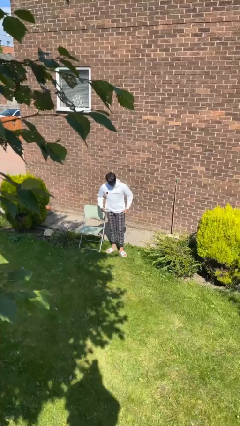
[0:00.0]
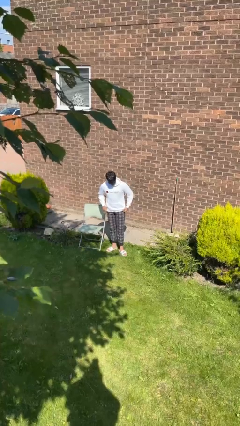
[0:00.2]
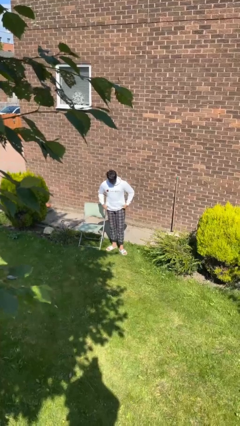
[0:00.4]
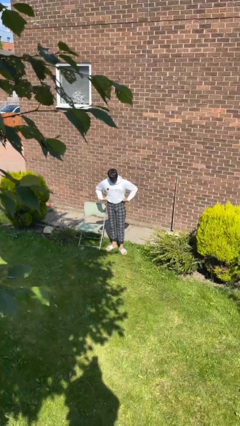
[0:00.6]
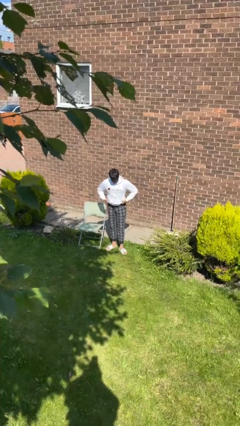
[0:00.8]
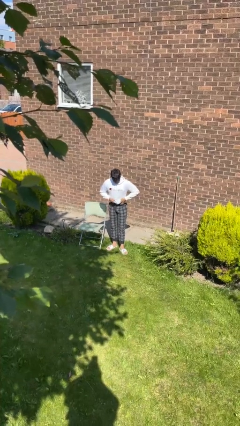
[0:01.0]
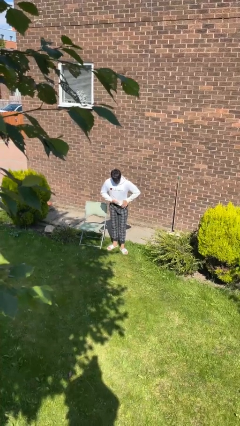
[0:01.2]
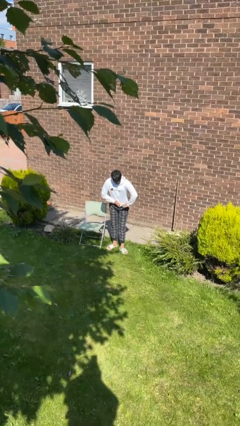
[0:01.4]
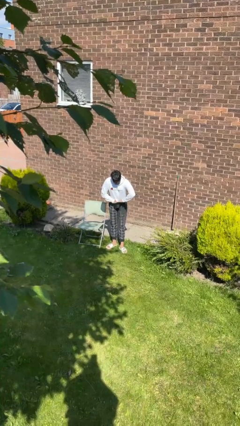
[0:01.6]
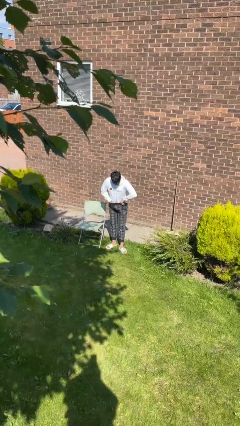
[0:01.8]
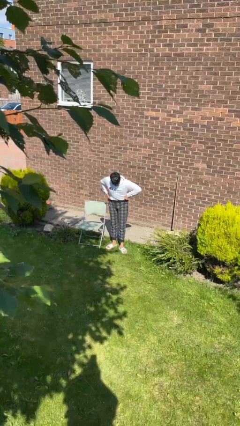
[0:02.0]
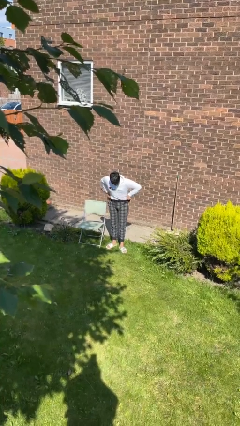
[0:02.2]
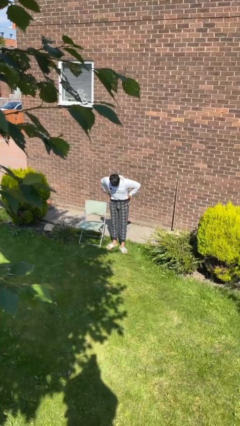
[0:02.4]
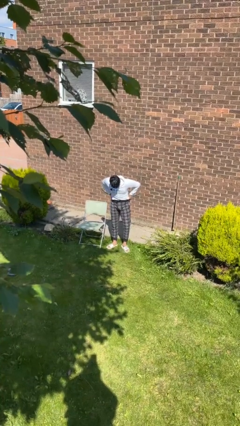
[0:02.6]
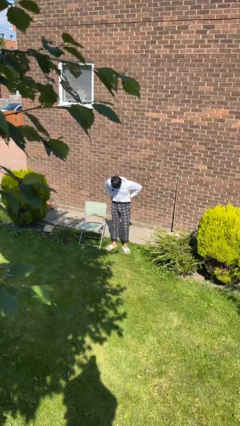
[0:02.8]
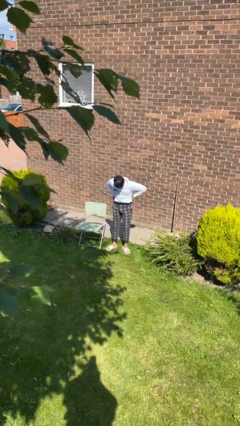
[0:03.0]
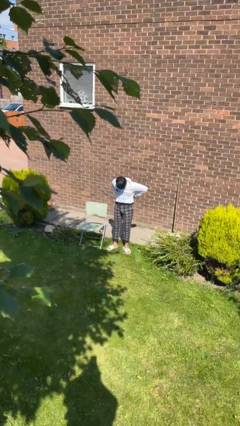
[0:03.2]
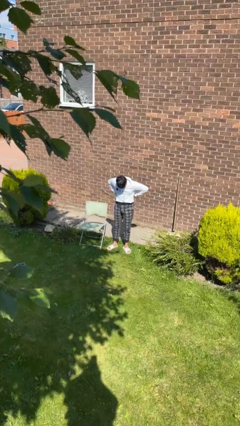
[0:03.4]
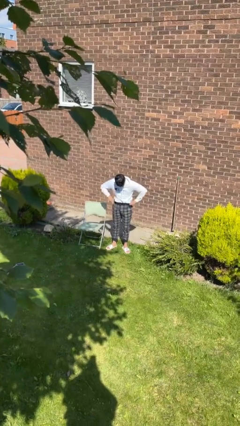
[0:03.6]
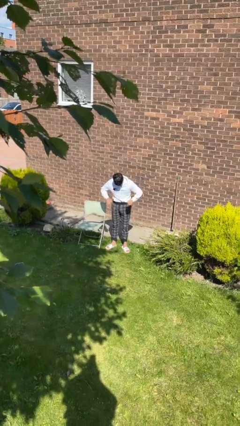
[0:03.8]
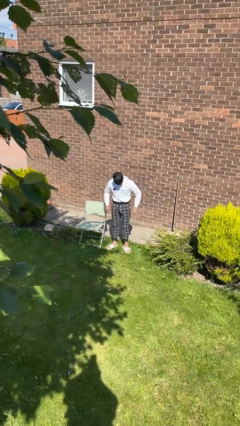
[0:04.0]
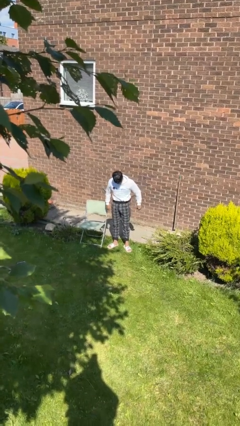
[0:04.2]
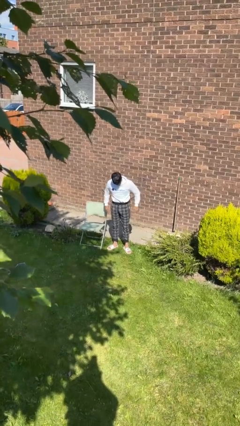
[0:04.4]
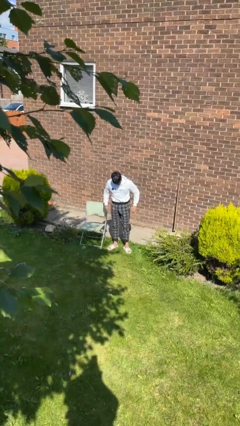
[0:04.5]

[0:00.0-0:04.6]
person tucks in shirt

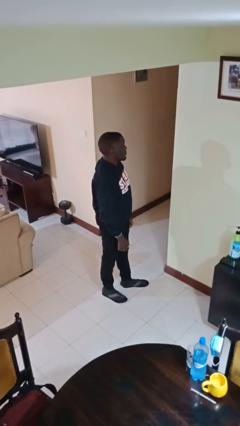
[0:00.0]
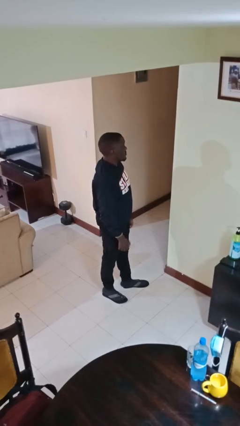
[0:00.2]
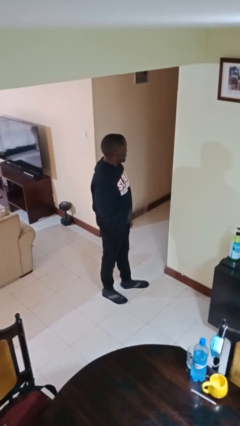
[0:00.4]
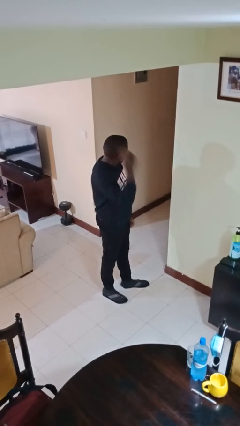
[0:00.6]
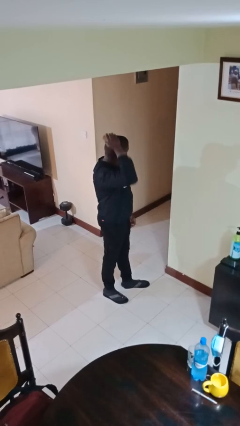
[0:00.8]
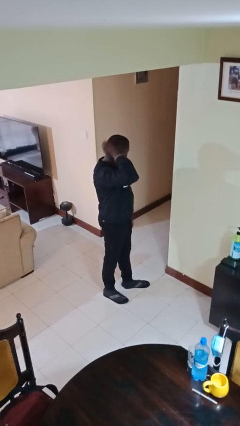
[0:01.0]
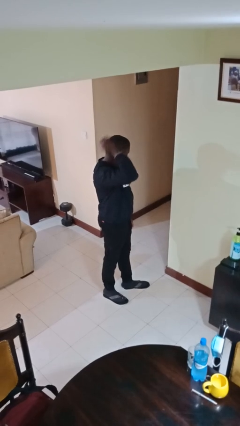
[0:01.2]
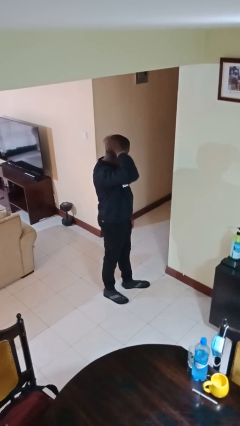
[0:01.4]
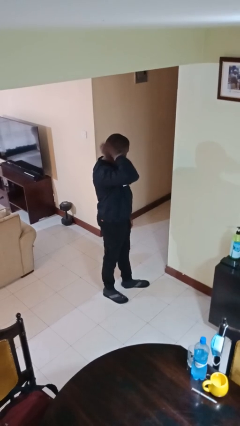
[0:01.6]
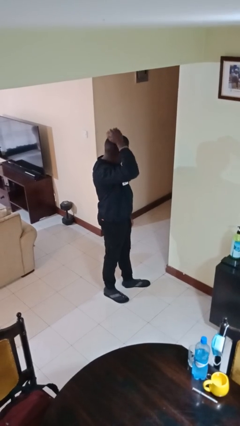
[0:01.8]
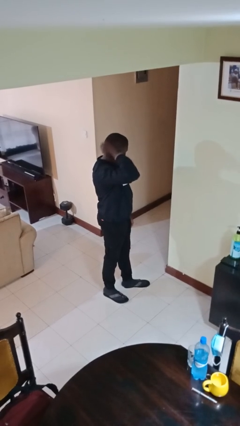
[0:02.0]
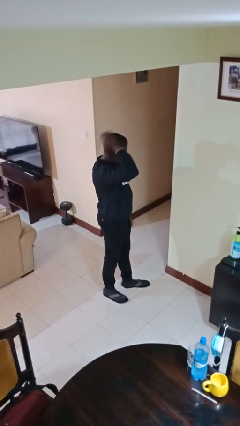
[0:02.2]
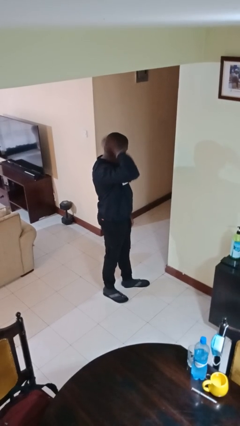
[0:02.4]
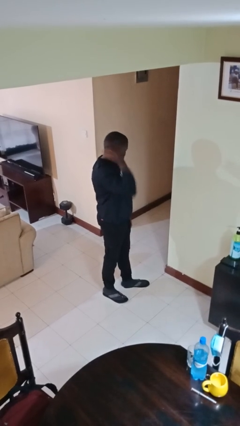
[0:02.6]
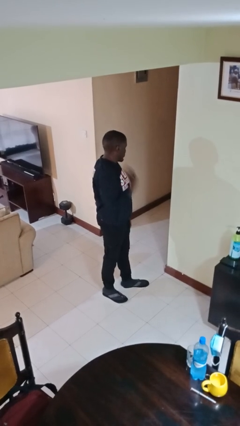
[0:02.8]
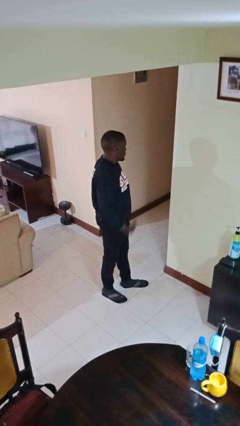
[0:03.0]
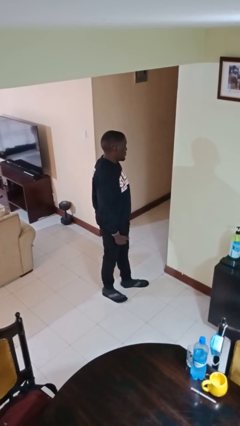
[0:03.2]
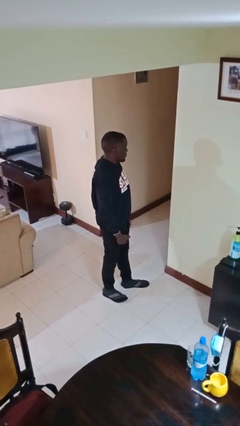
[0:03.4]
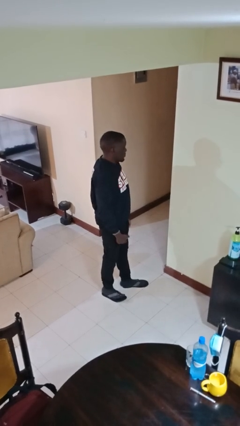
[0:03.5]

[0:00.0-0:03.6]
person brushes hair

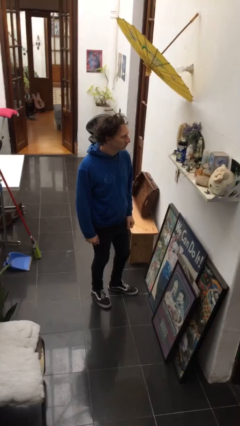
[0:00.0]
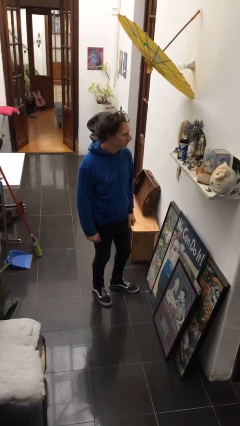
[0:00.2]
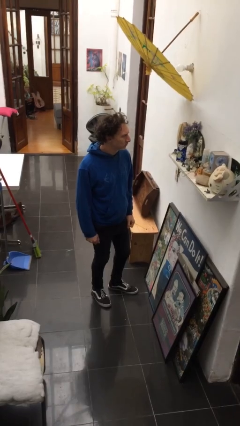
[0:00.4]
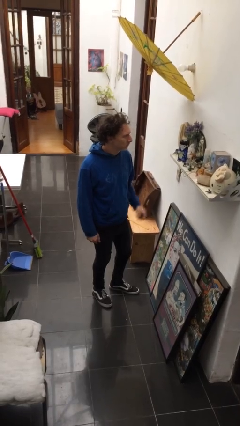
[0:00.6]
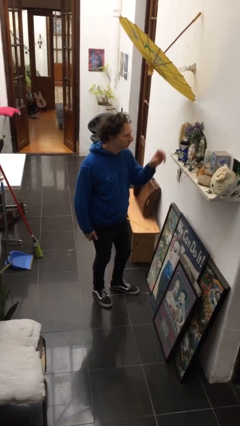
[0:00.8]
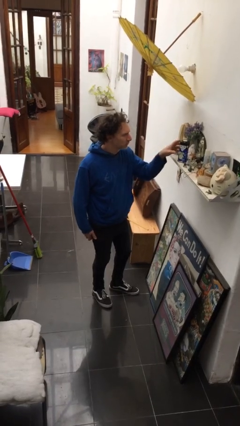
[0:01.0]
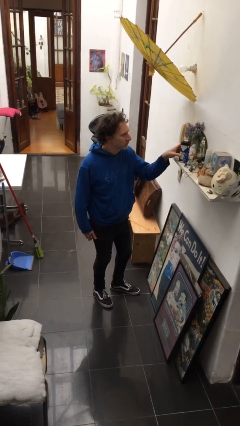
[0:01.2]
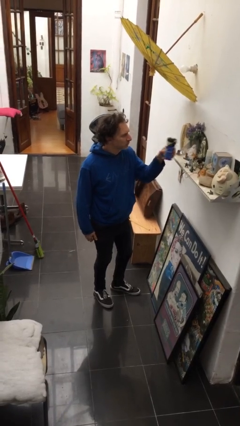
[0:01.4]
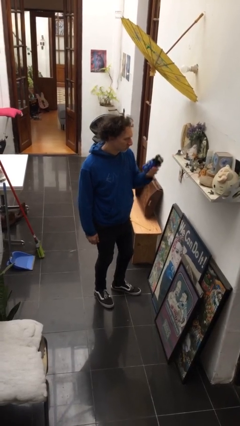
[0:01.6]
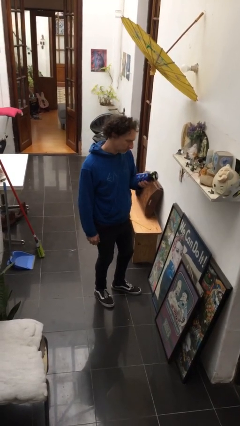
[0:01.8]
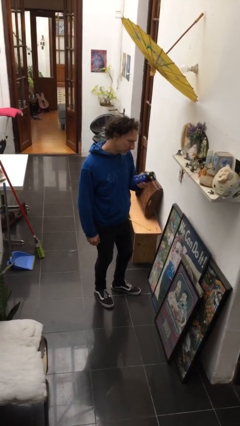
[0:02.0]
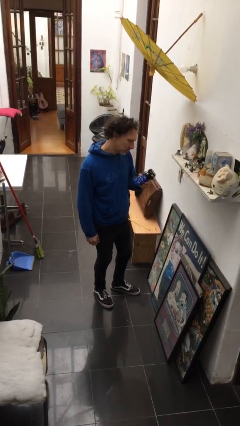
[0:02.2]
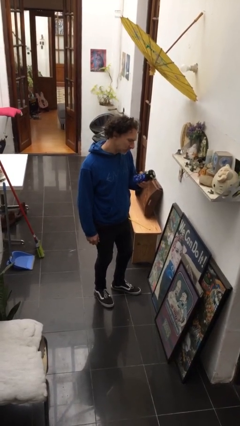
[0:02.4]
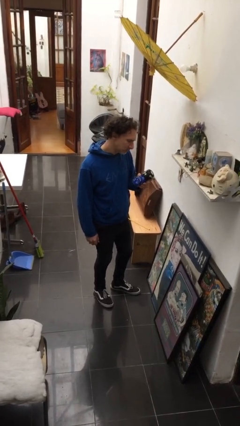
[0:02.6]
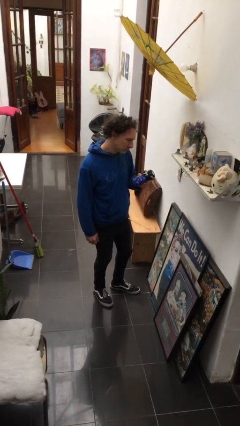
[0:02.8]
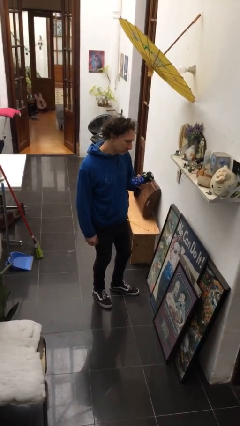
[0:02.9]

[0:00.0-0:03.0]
person picks up object from shelf

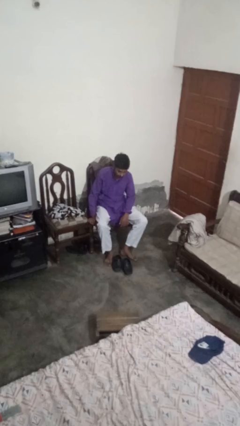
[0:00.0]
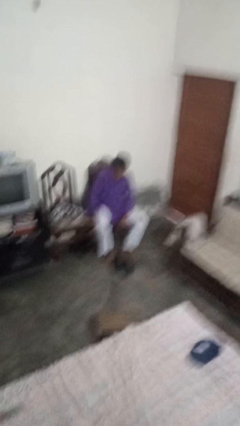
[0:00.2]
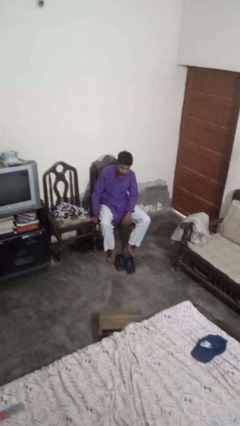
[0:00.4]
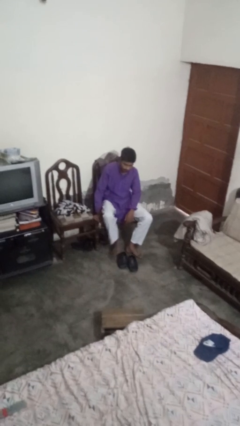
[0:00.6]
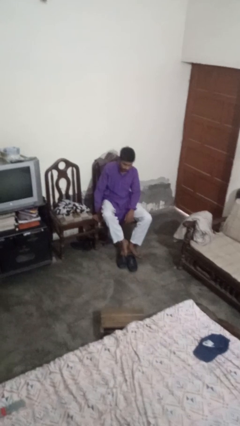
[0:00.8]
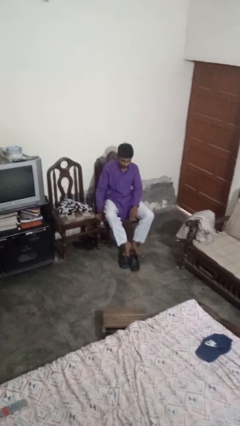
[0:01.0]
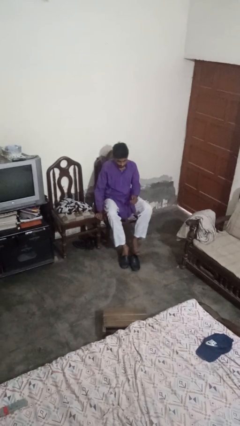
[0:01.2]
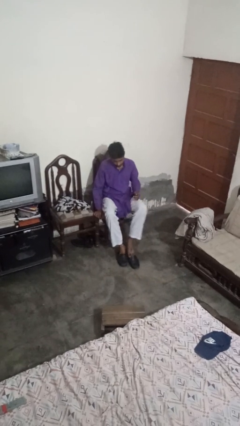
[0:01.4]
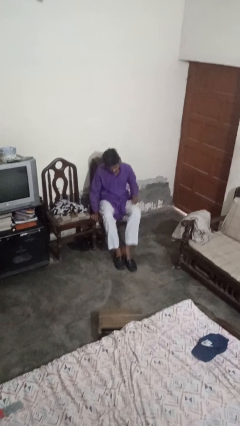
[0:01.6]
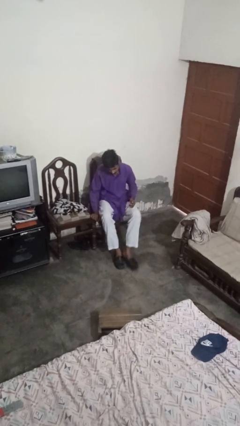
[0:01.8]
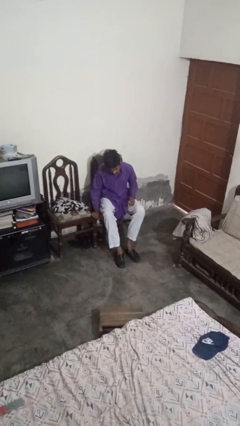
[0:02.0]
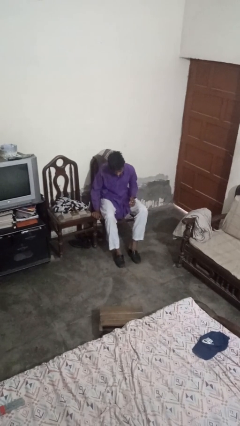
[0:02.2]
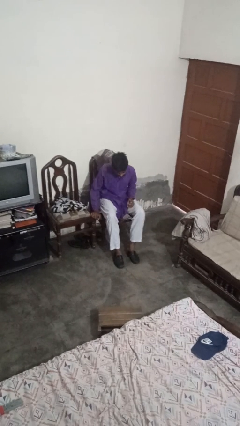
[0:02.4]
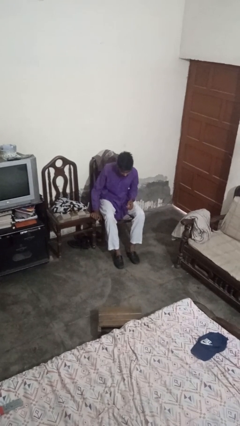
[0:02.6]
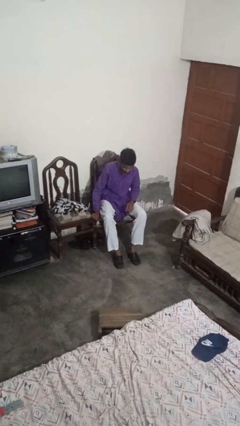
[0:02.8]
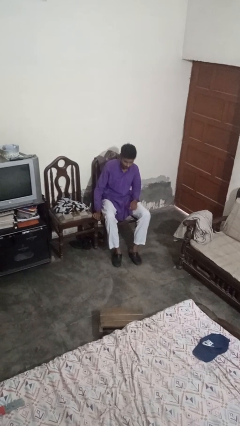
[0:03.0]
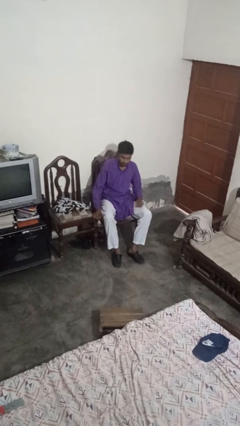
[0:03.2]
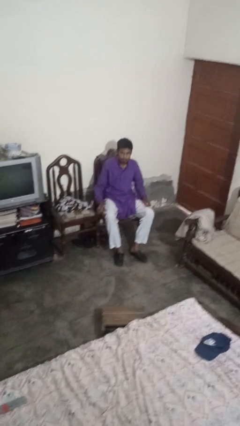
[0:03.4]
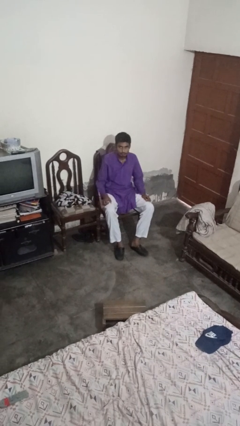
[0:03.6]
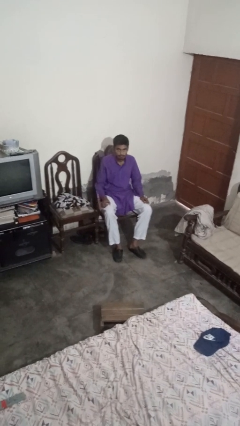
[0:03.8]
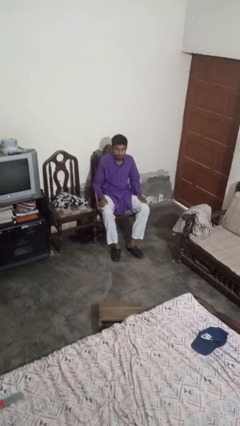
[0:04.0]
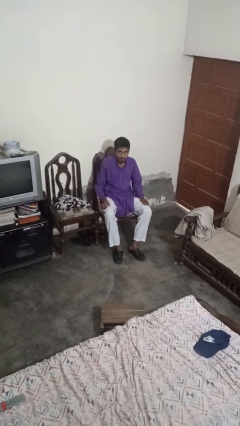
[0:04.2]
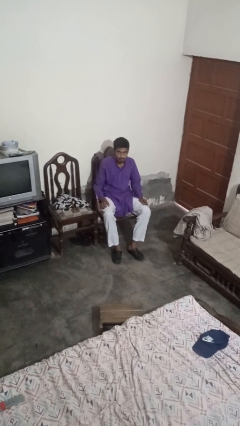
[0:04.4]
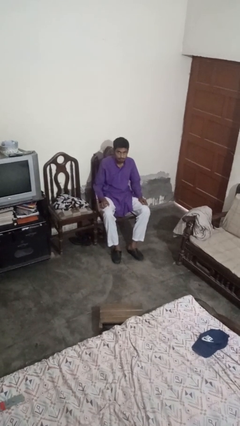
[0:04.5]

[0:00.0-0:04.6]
person puts on shoes

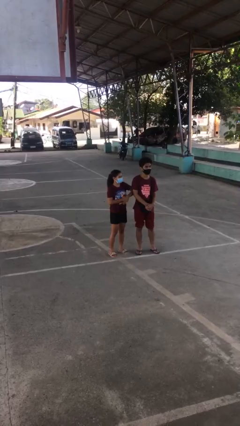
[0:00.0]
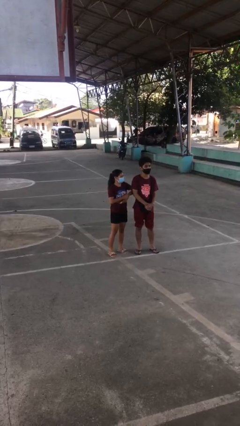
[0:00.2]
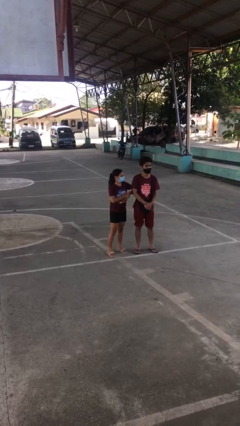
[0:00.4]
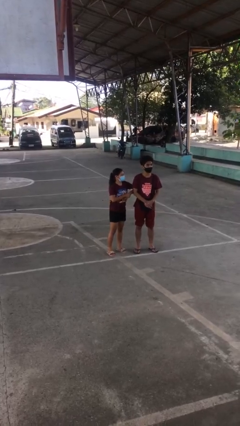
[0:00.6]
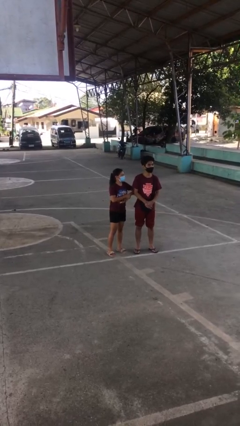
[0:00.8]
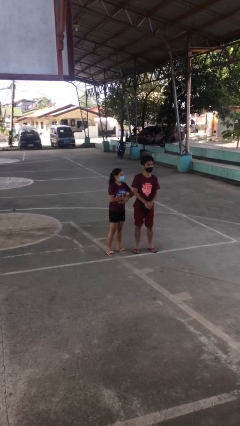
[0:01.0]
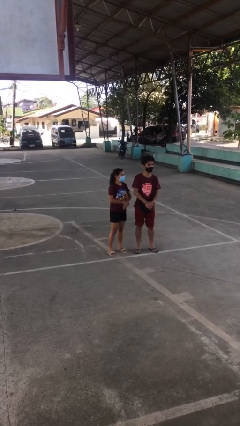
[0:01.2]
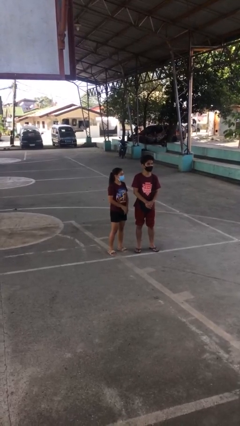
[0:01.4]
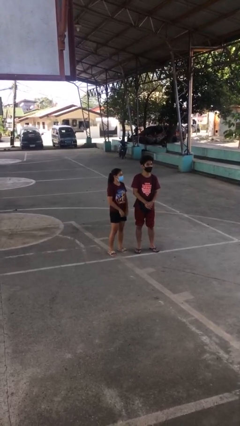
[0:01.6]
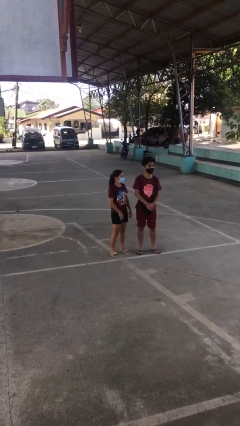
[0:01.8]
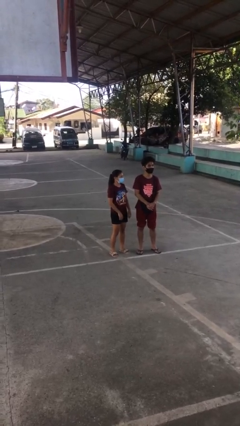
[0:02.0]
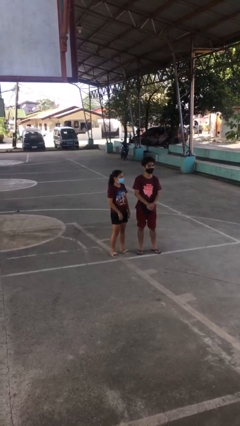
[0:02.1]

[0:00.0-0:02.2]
person nudges person with elbow
